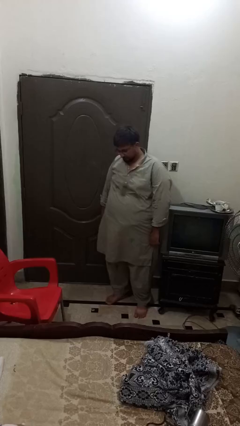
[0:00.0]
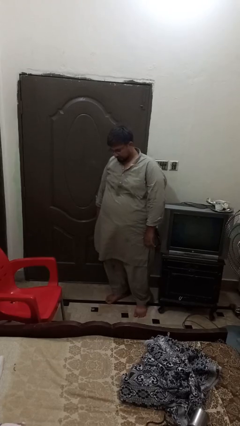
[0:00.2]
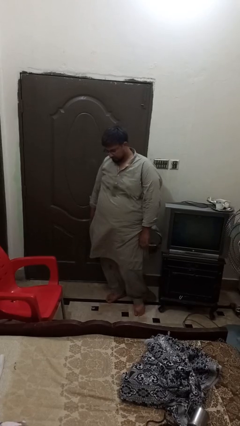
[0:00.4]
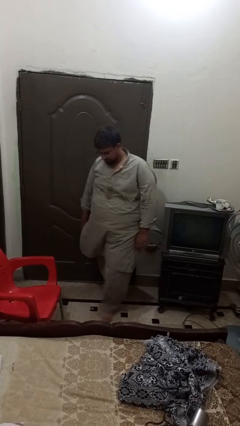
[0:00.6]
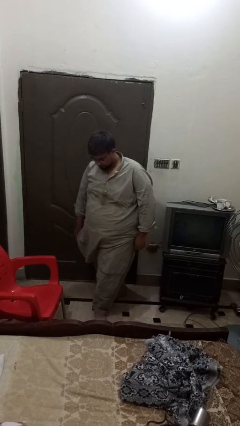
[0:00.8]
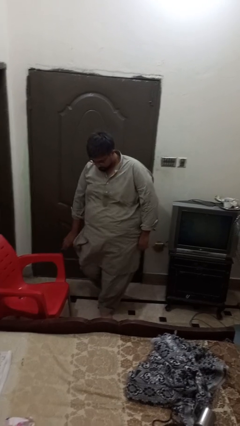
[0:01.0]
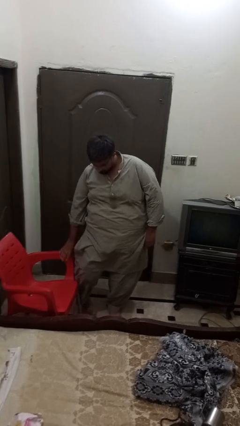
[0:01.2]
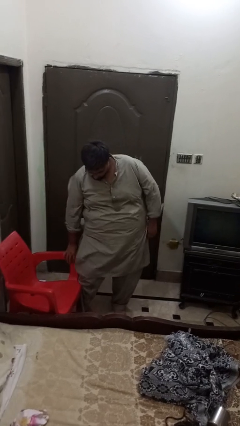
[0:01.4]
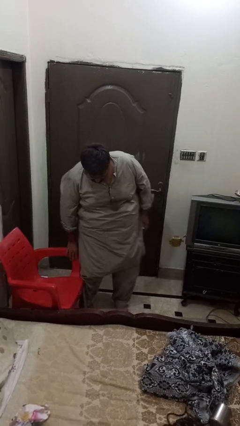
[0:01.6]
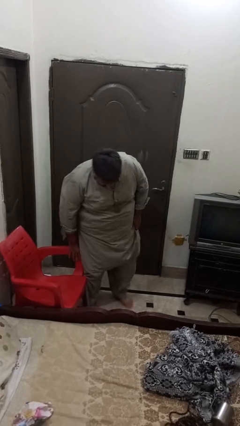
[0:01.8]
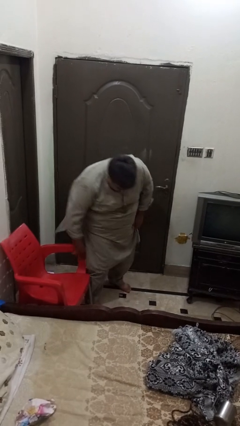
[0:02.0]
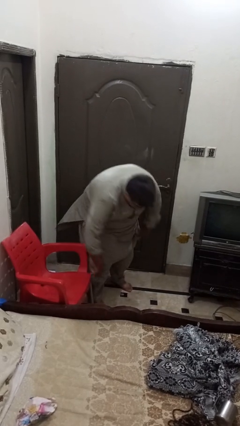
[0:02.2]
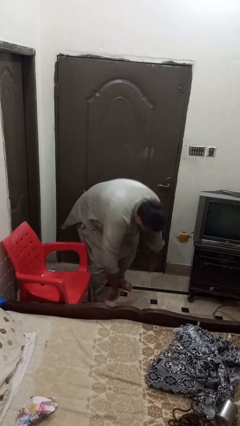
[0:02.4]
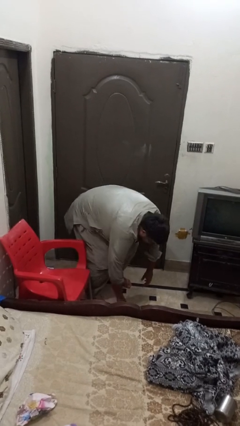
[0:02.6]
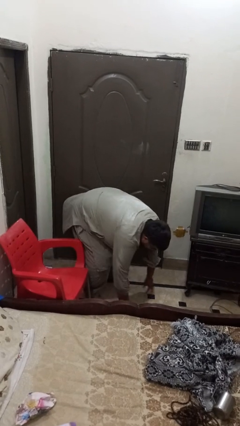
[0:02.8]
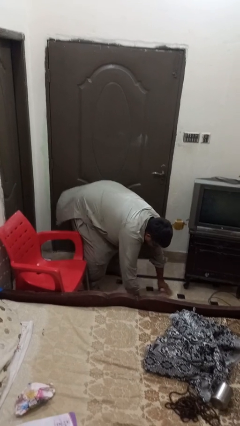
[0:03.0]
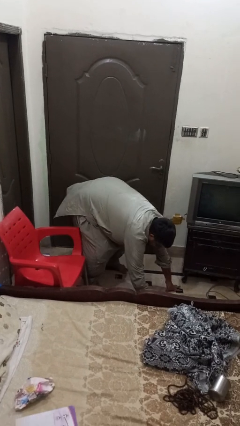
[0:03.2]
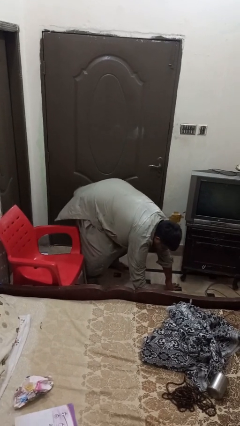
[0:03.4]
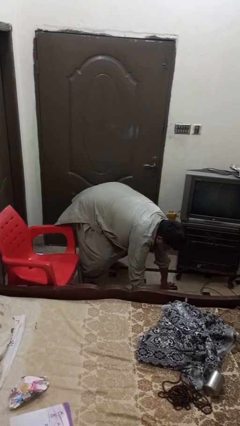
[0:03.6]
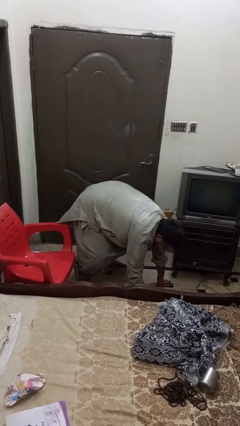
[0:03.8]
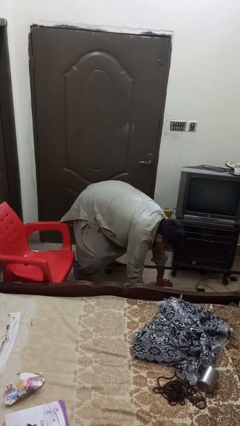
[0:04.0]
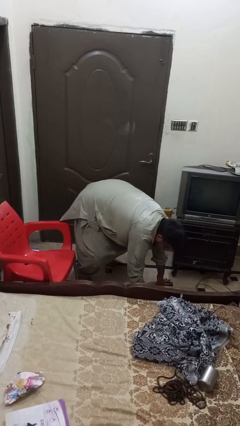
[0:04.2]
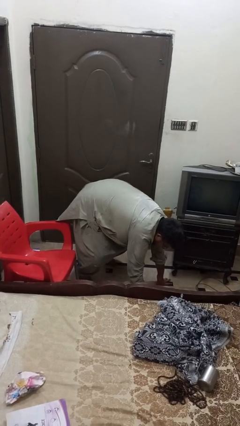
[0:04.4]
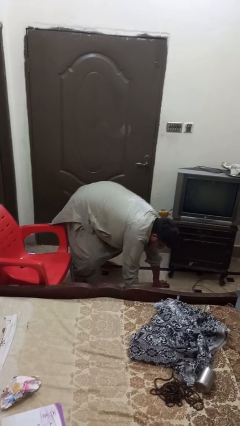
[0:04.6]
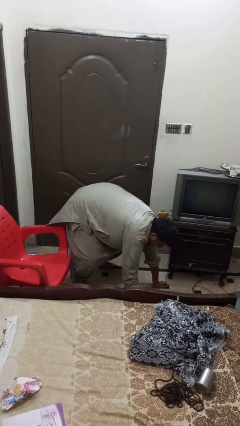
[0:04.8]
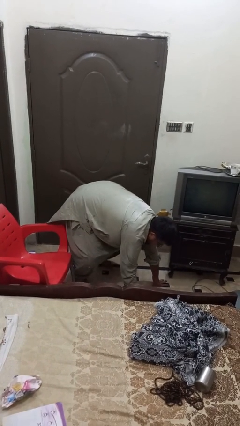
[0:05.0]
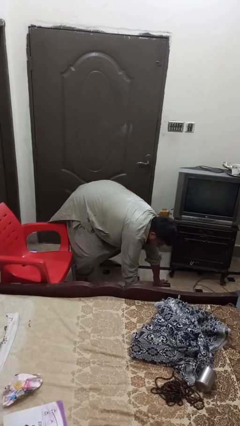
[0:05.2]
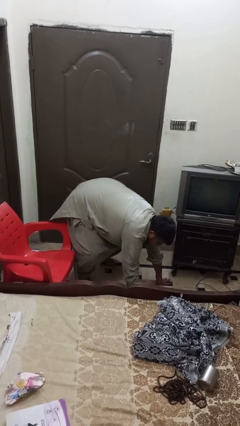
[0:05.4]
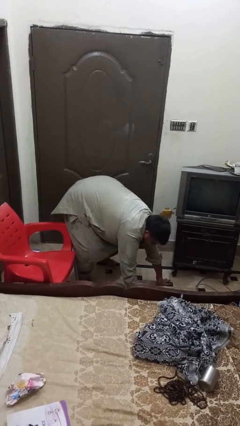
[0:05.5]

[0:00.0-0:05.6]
person trips on object on floor

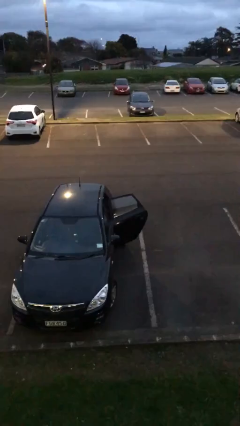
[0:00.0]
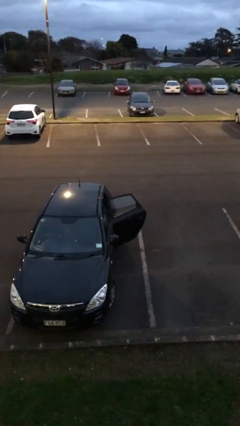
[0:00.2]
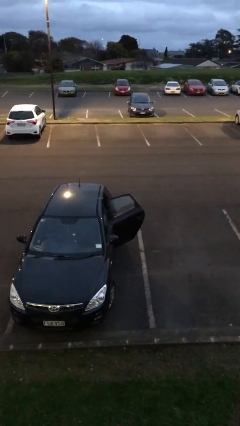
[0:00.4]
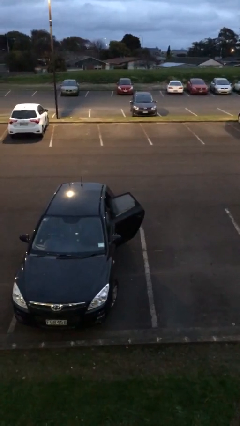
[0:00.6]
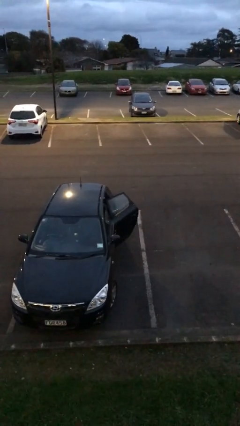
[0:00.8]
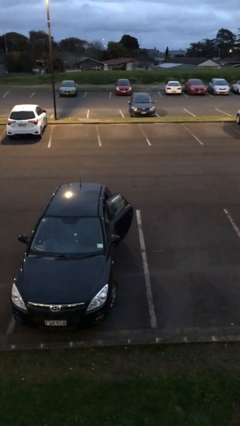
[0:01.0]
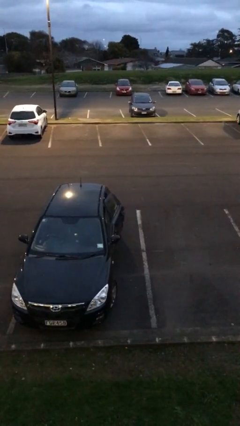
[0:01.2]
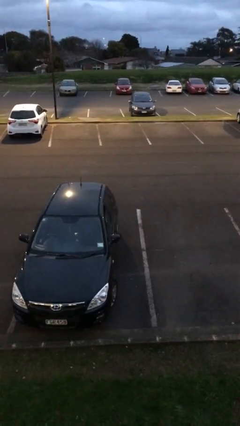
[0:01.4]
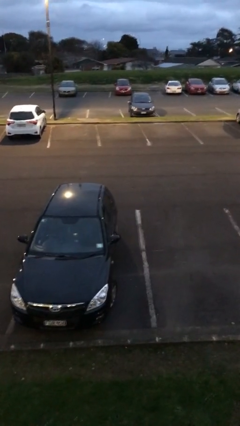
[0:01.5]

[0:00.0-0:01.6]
person closes car door

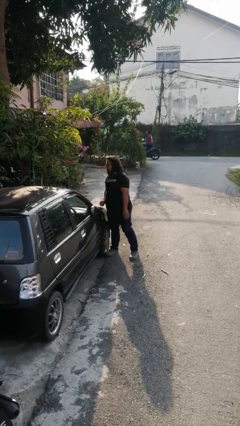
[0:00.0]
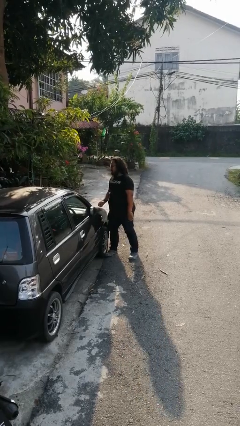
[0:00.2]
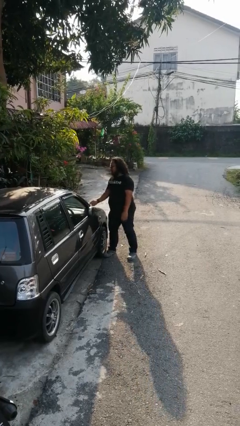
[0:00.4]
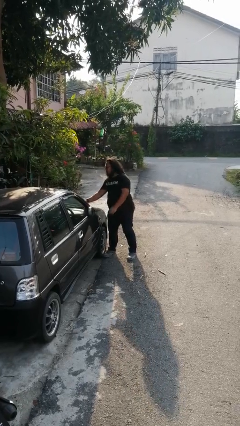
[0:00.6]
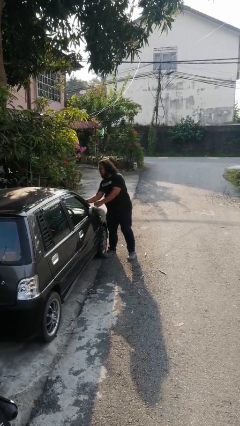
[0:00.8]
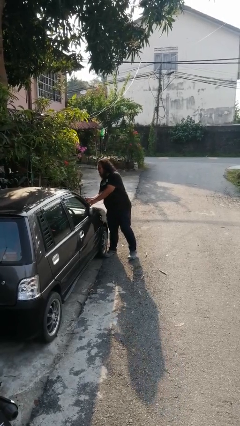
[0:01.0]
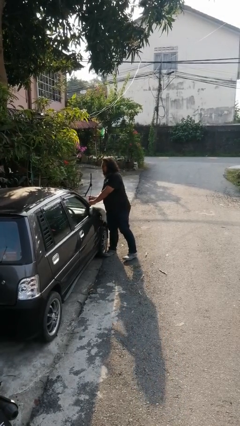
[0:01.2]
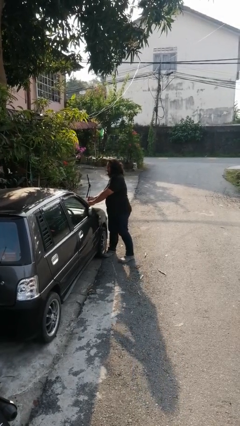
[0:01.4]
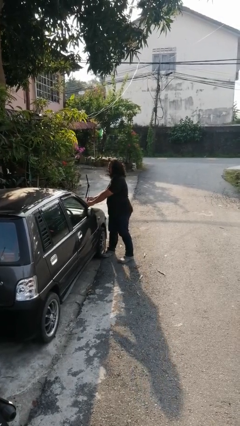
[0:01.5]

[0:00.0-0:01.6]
person flips up car wipers

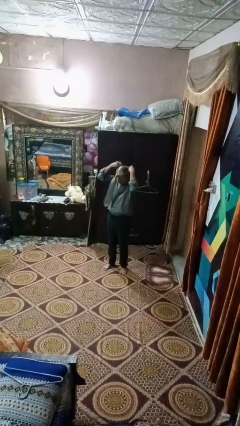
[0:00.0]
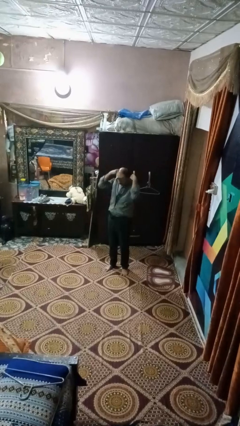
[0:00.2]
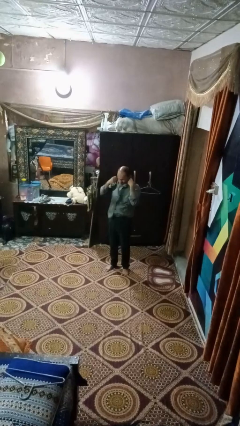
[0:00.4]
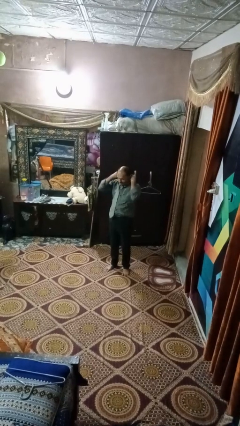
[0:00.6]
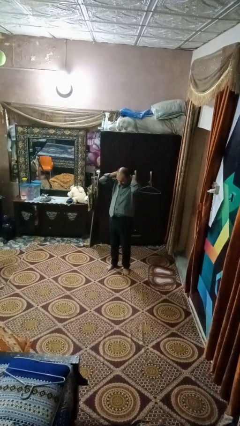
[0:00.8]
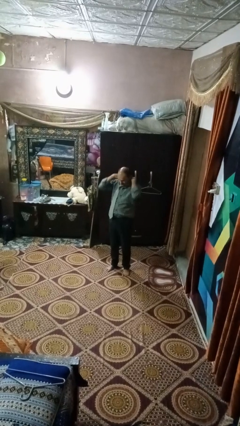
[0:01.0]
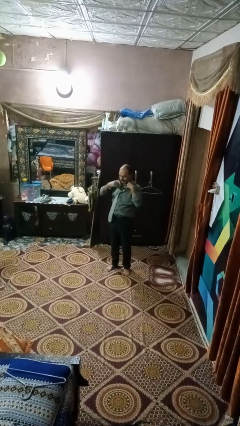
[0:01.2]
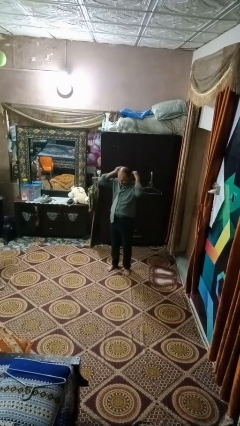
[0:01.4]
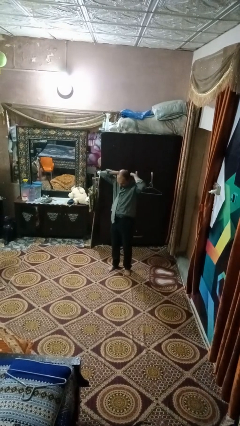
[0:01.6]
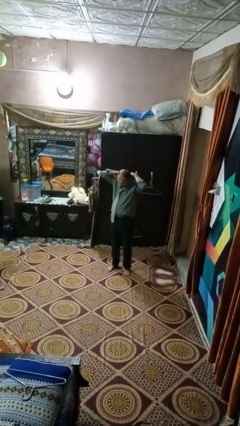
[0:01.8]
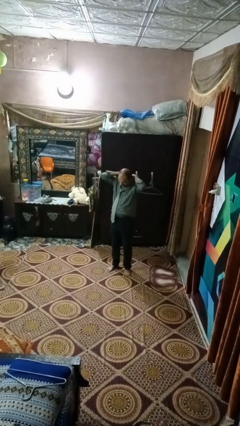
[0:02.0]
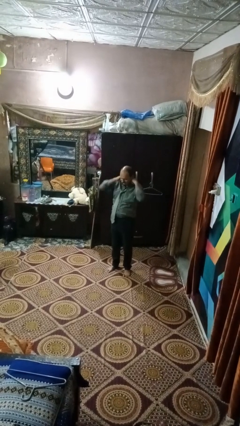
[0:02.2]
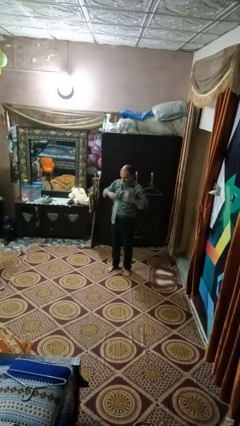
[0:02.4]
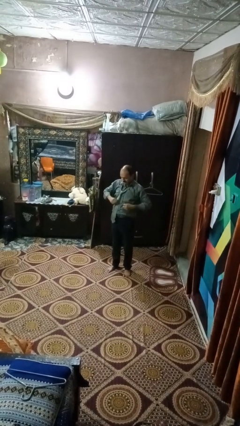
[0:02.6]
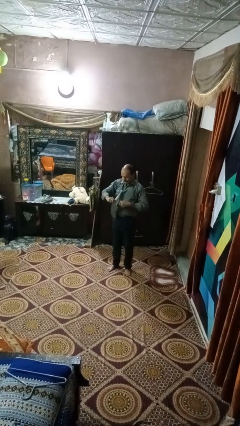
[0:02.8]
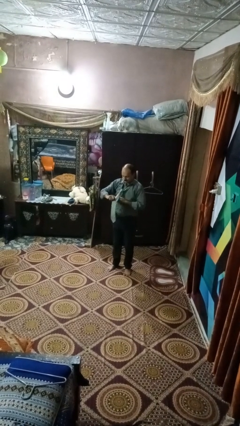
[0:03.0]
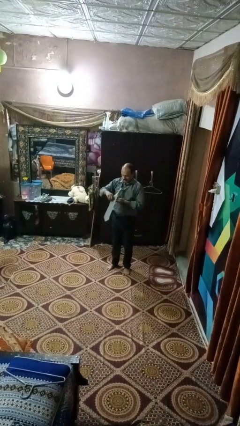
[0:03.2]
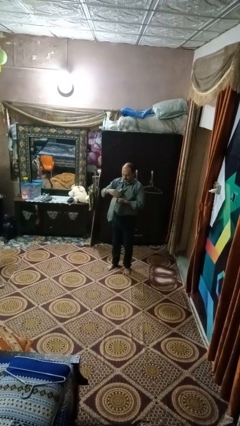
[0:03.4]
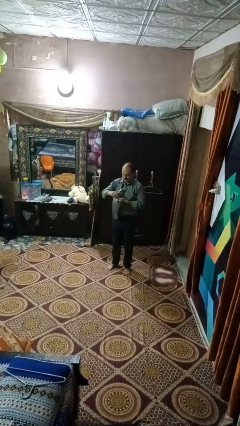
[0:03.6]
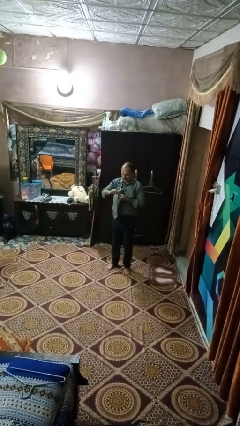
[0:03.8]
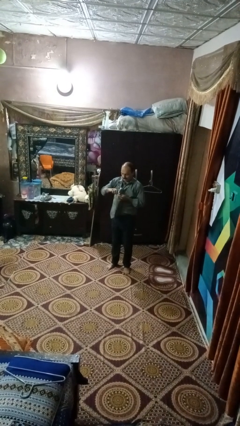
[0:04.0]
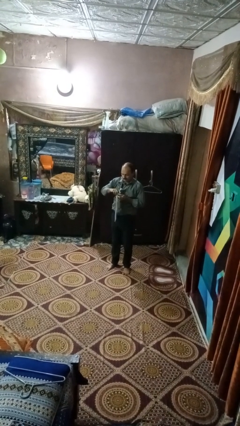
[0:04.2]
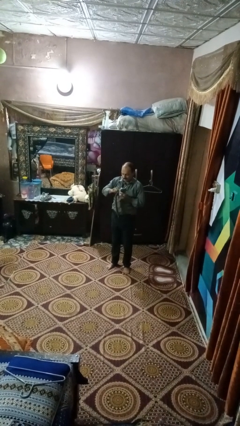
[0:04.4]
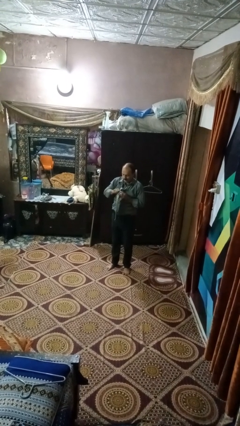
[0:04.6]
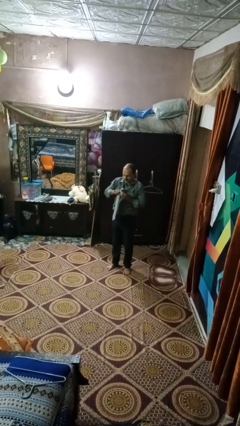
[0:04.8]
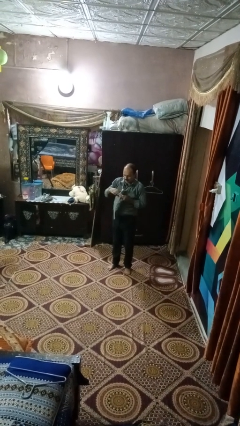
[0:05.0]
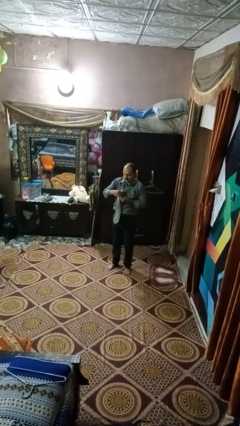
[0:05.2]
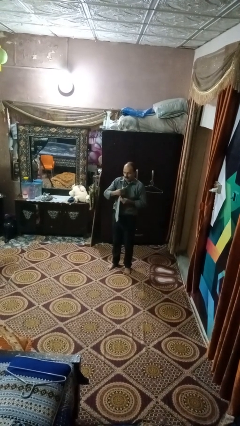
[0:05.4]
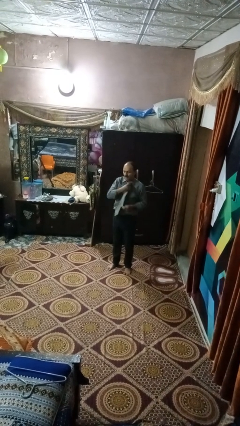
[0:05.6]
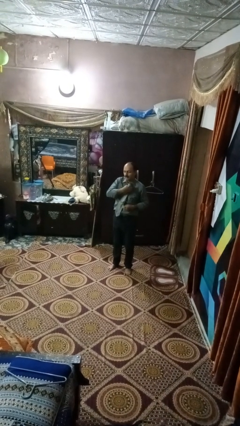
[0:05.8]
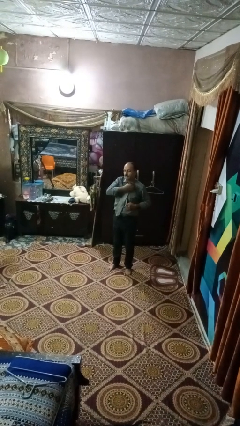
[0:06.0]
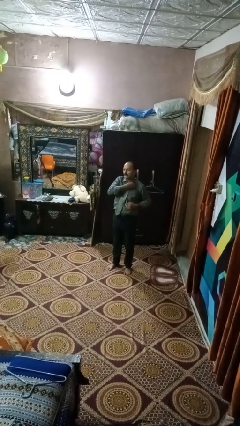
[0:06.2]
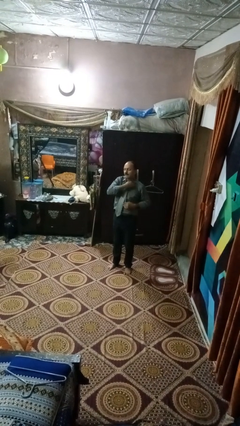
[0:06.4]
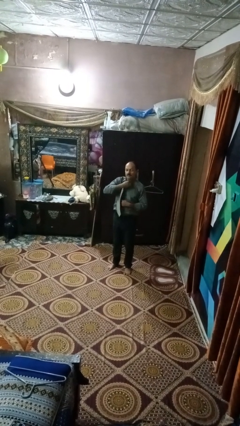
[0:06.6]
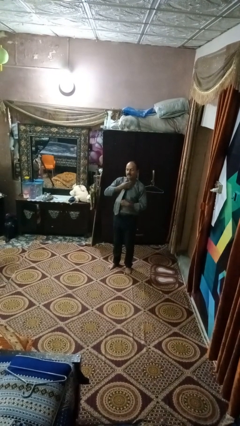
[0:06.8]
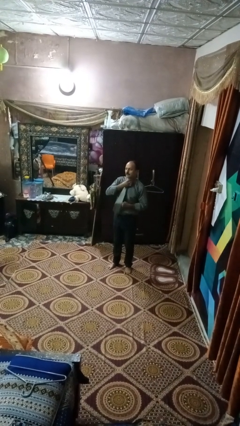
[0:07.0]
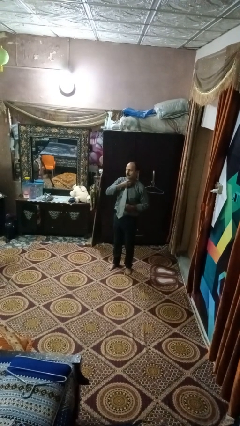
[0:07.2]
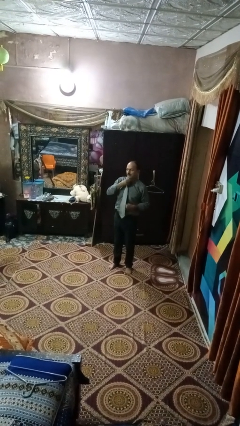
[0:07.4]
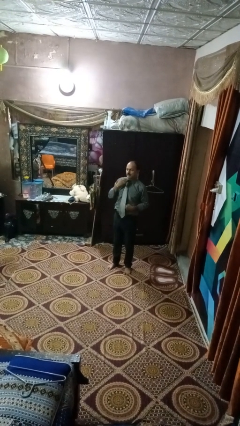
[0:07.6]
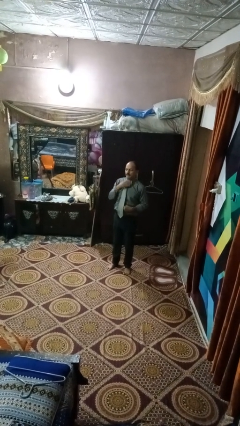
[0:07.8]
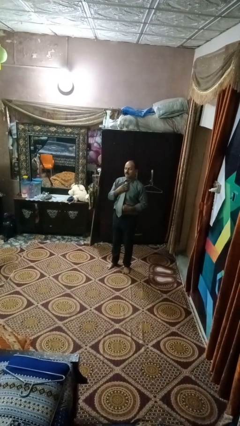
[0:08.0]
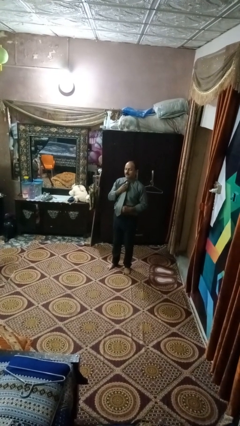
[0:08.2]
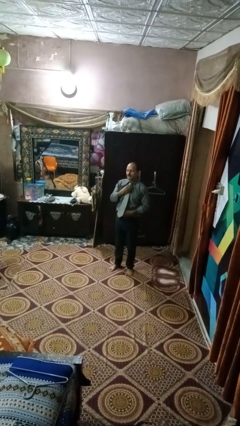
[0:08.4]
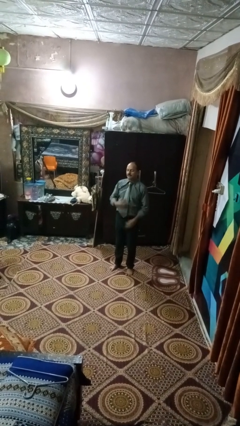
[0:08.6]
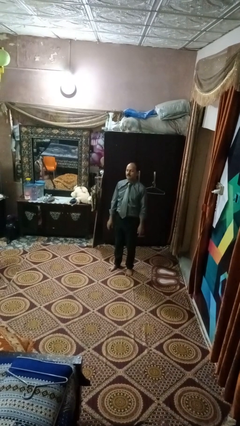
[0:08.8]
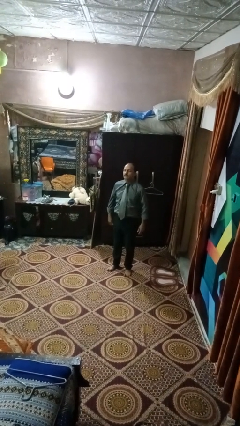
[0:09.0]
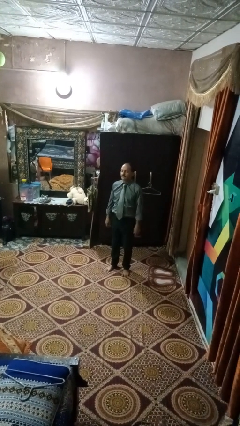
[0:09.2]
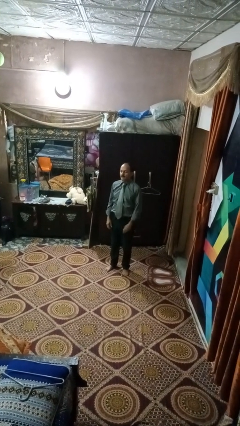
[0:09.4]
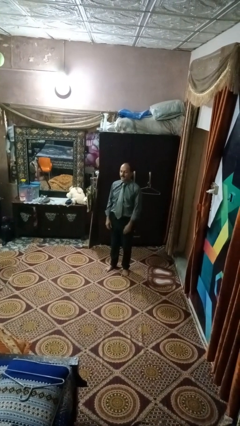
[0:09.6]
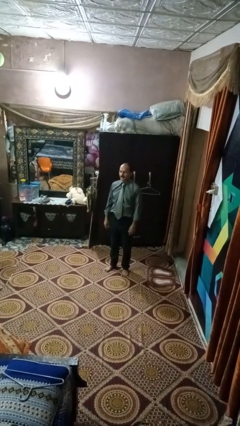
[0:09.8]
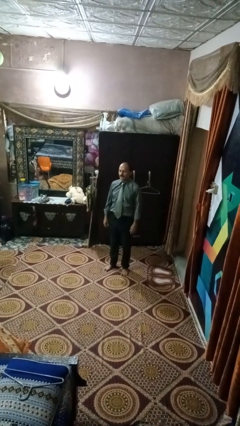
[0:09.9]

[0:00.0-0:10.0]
person puts on necktie
